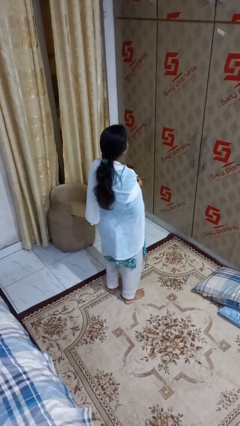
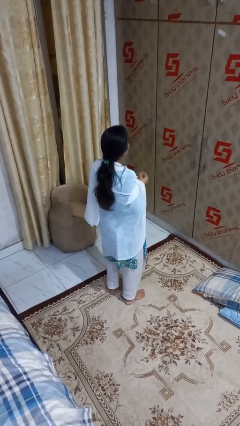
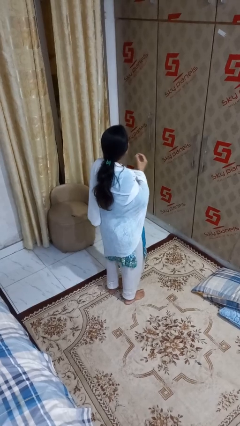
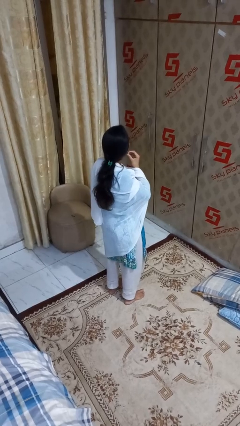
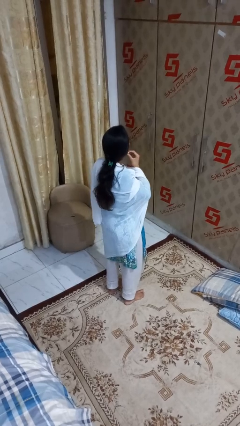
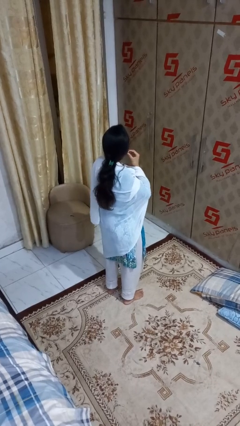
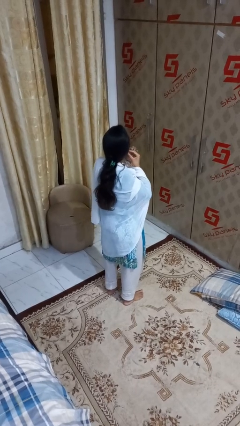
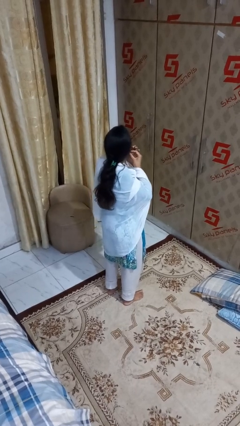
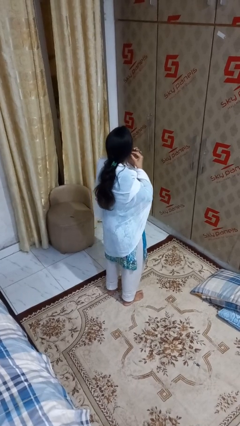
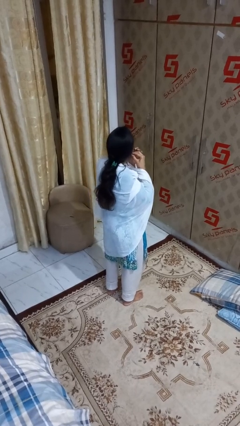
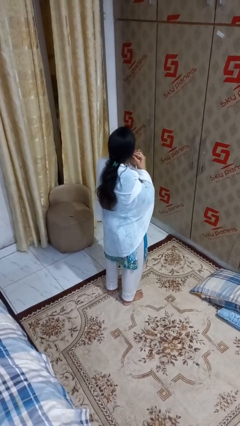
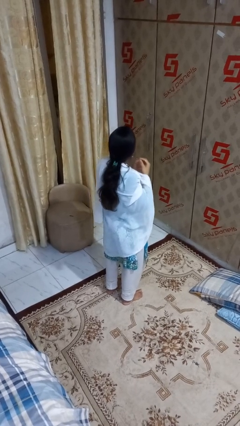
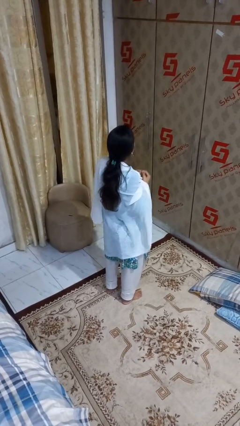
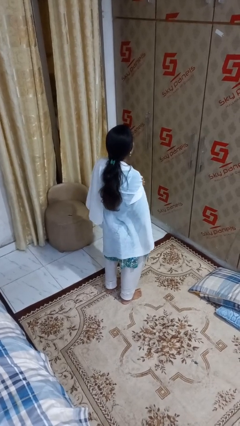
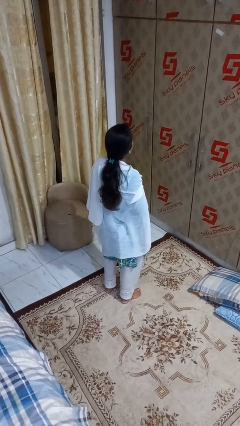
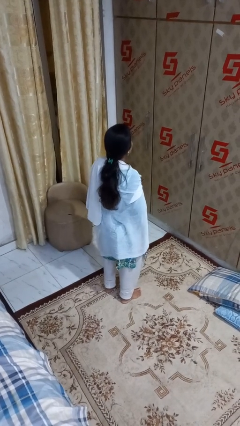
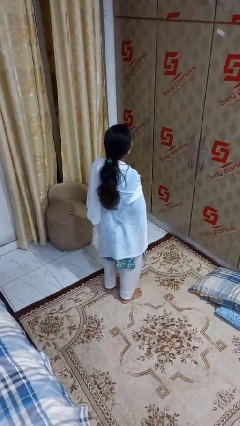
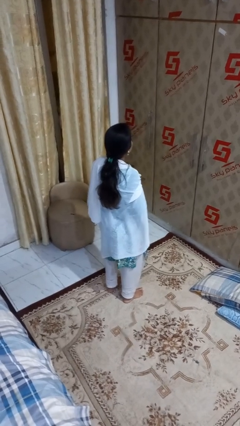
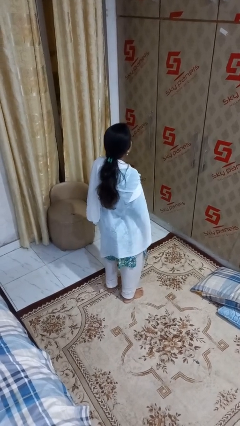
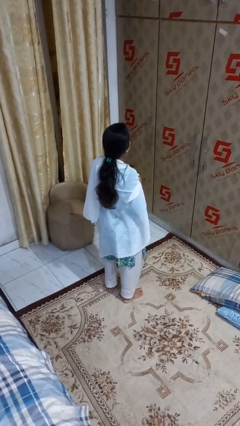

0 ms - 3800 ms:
person puts on earrings

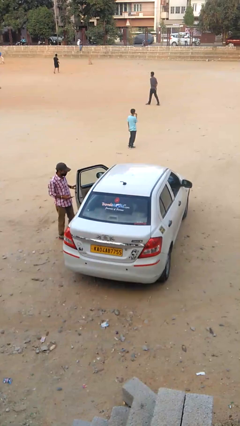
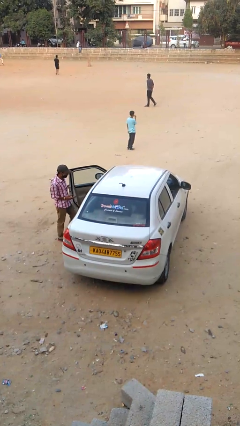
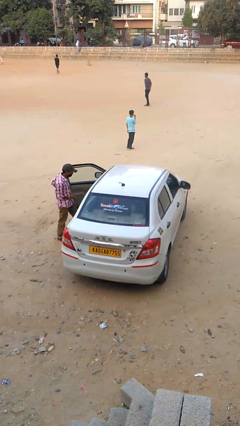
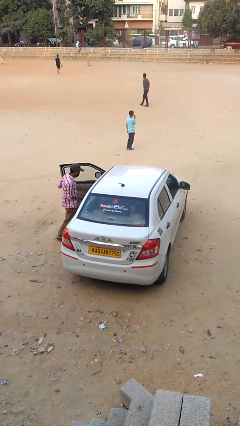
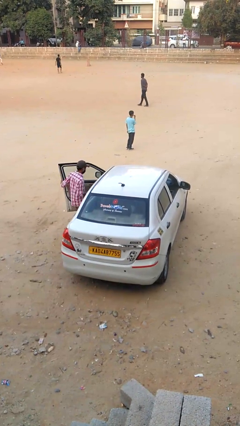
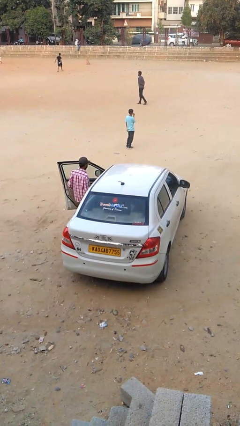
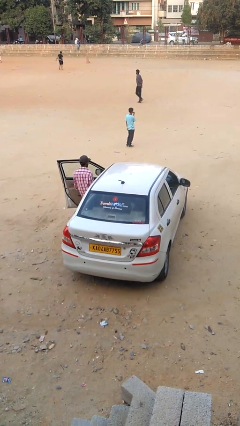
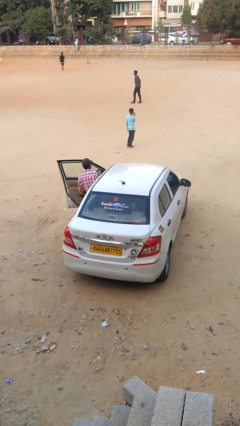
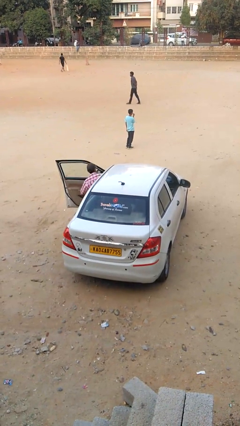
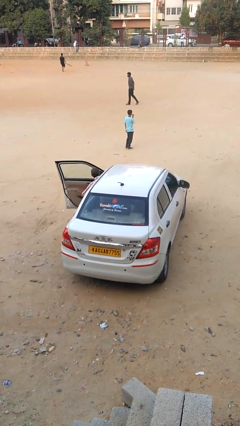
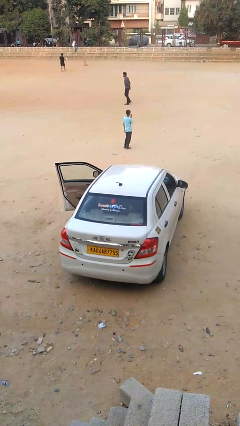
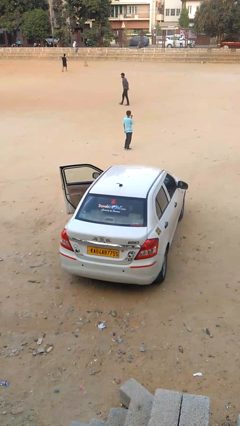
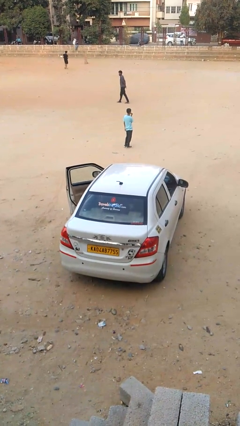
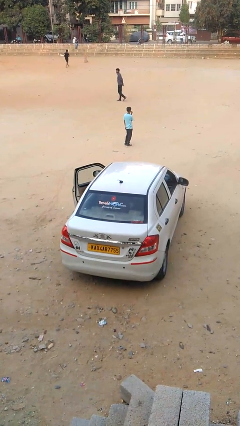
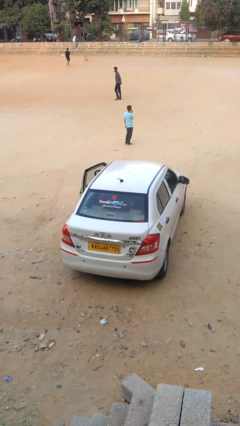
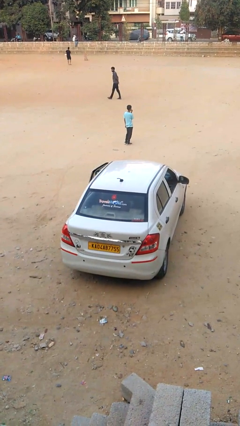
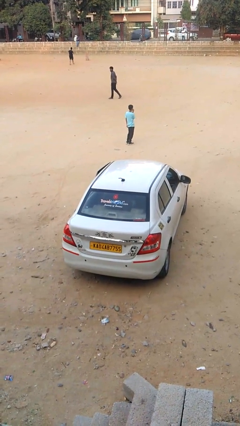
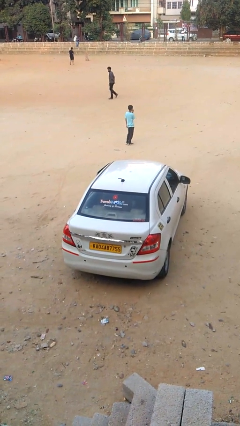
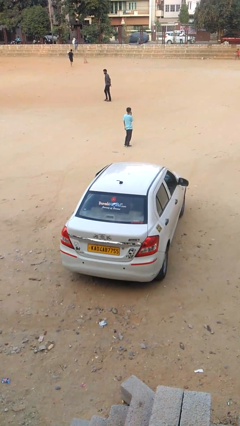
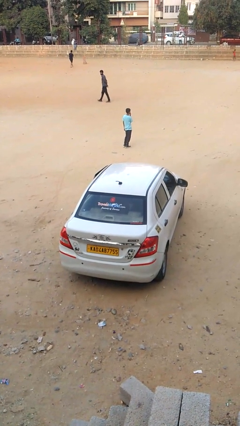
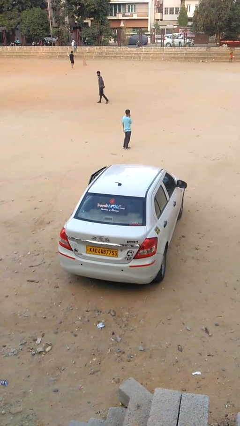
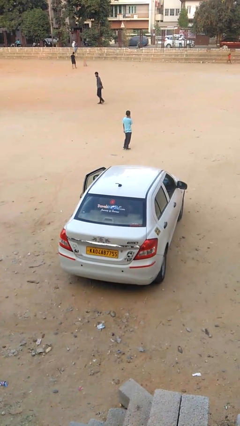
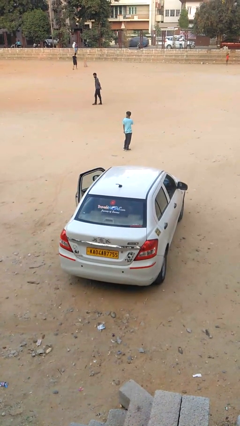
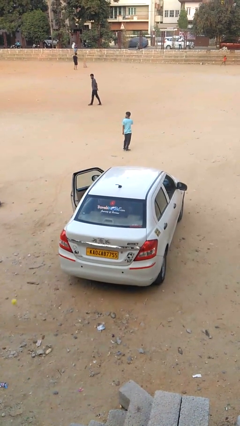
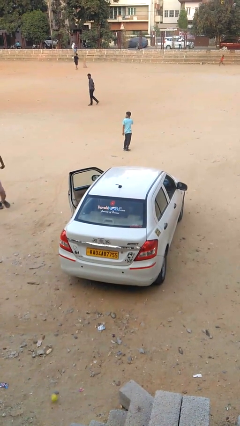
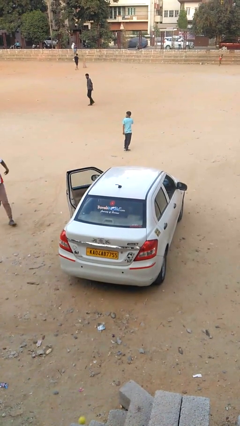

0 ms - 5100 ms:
car picks up person

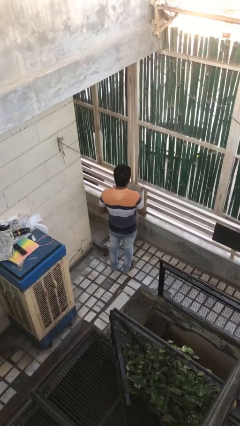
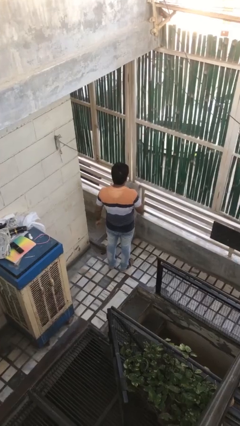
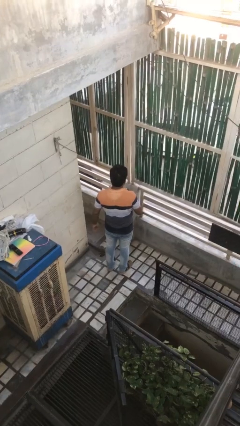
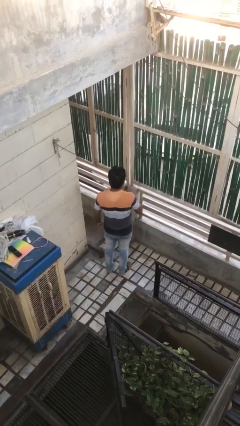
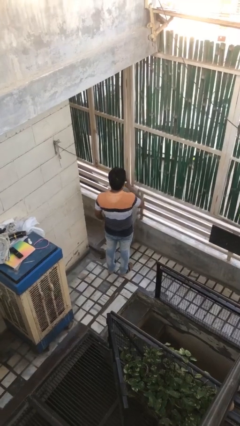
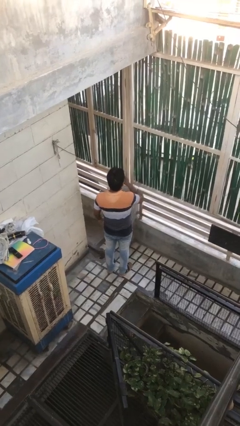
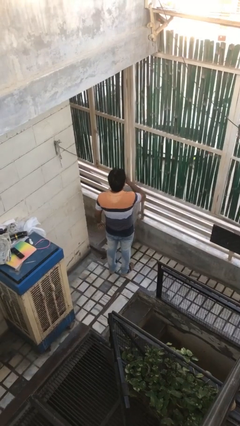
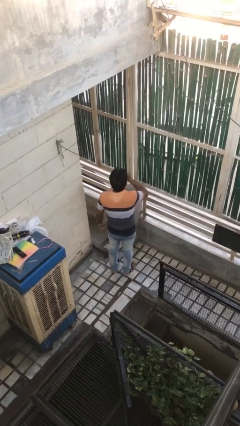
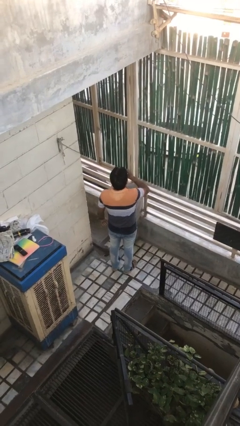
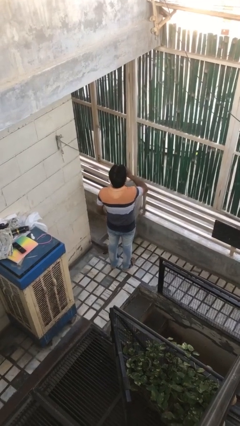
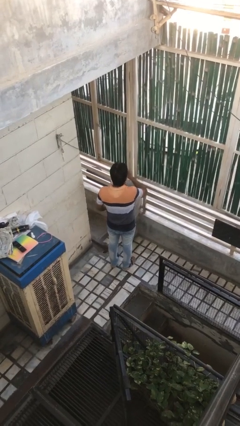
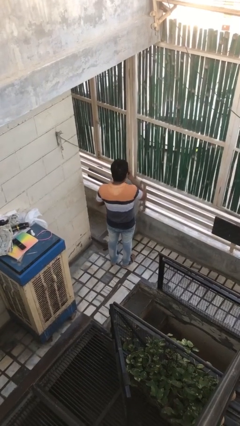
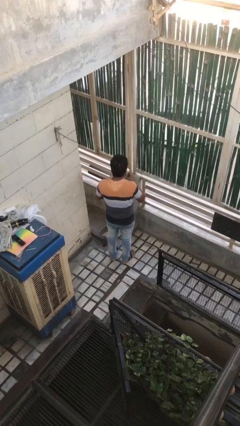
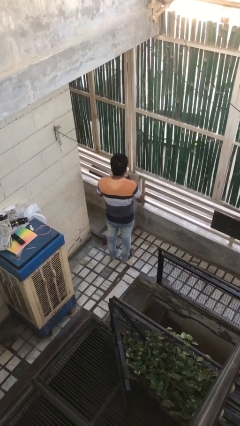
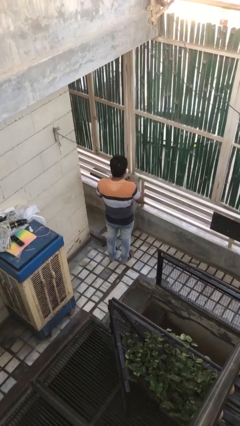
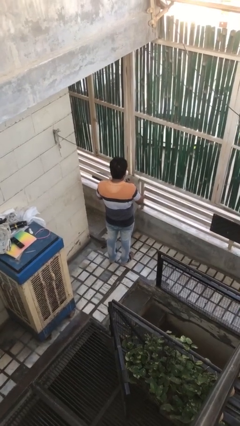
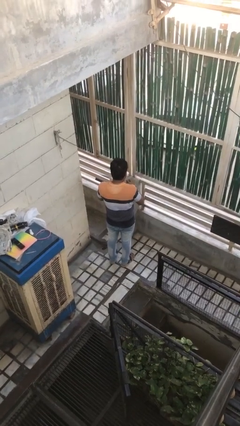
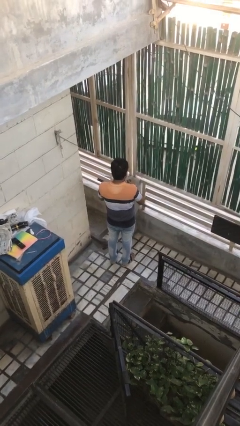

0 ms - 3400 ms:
person drinks from beverage can

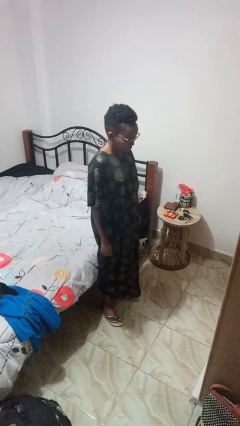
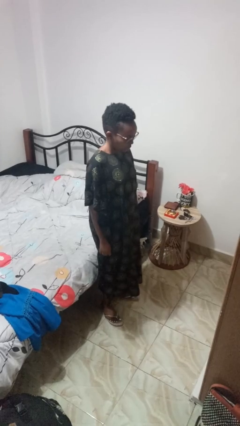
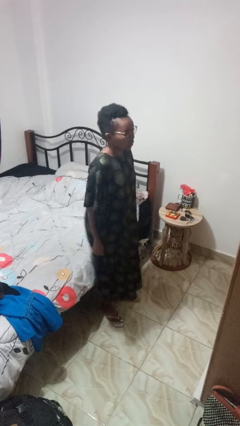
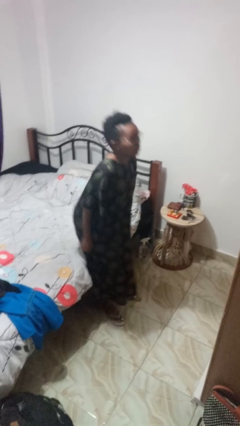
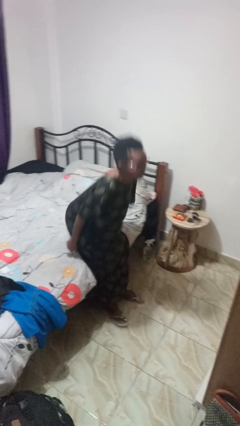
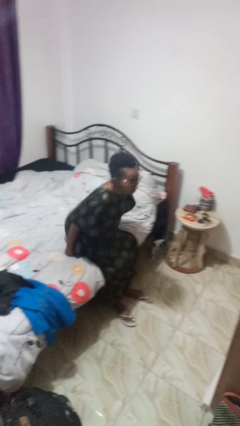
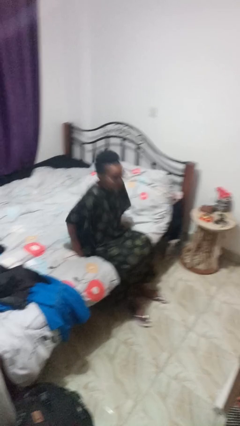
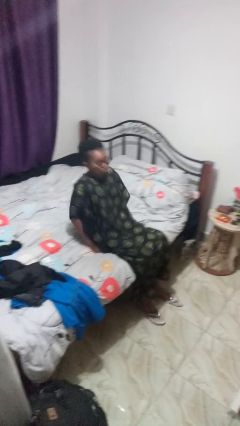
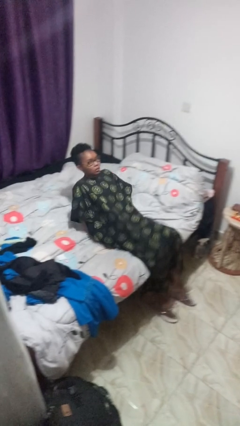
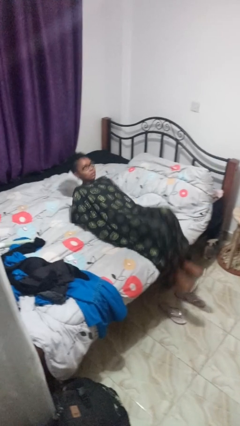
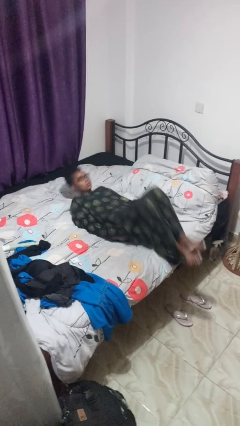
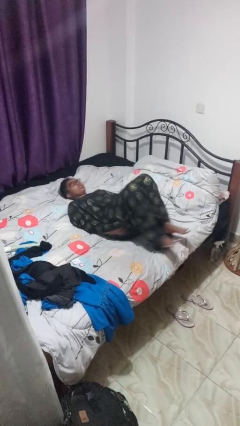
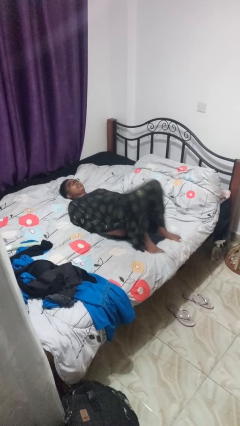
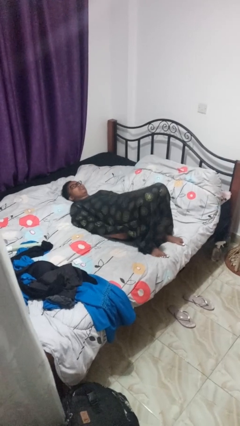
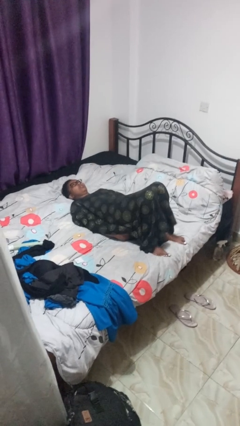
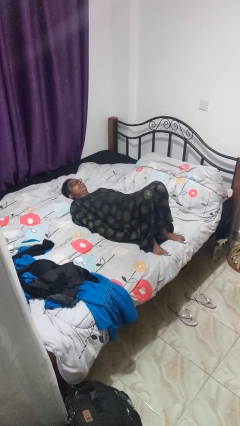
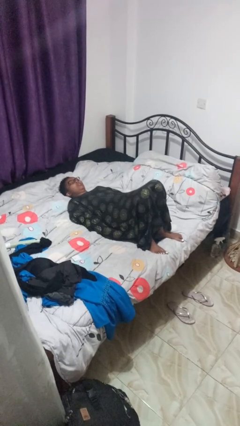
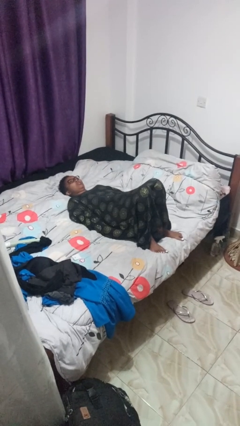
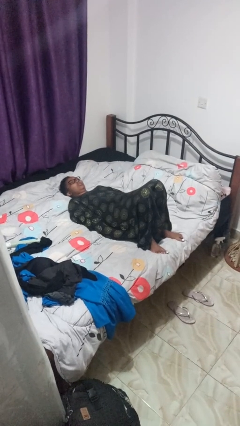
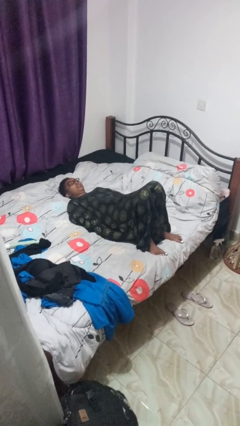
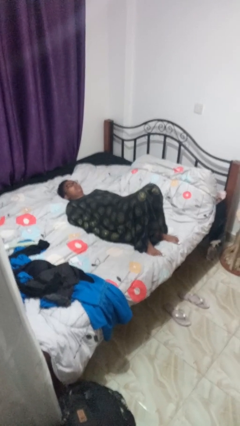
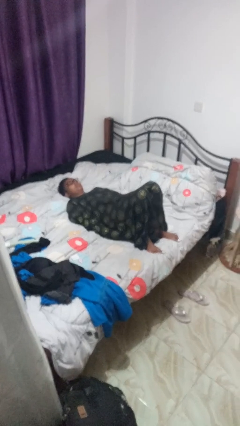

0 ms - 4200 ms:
person lies down on bed

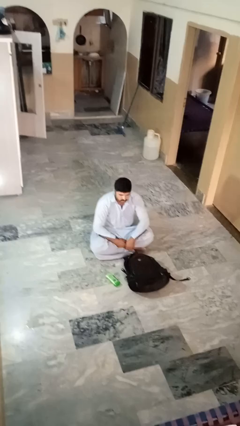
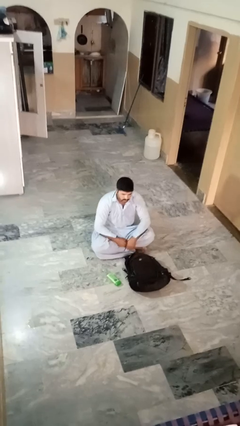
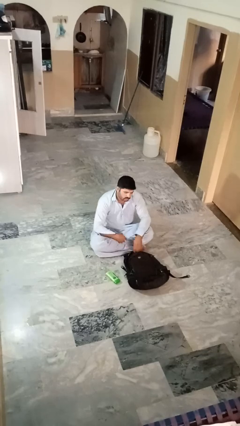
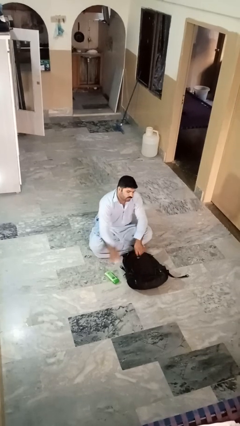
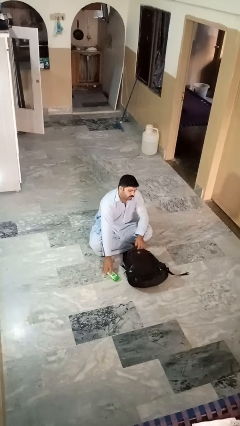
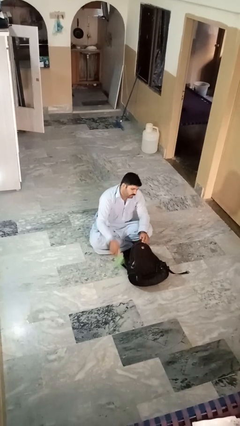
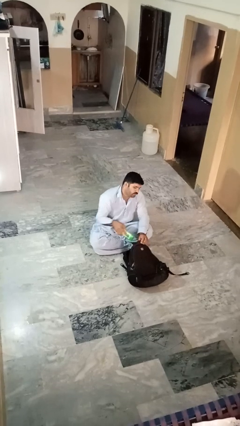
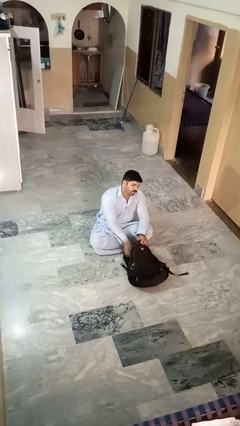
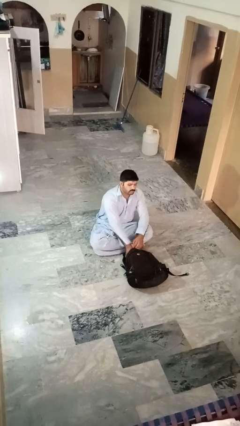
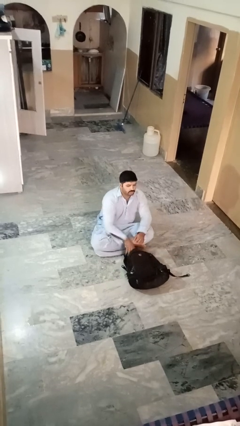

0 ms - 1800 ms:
person puts object into bag
